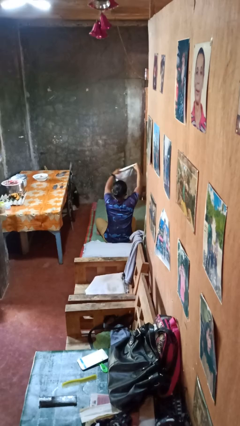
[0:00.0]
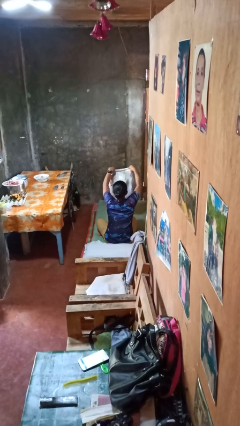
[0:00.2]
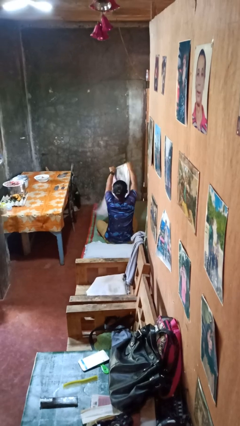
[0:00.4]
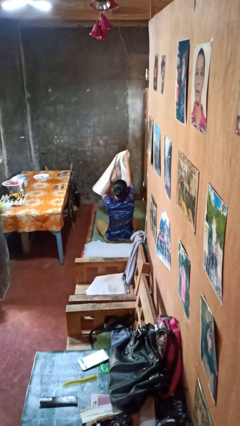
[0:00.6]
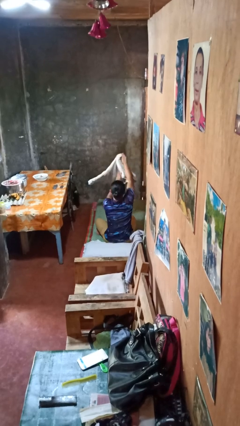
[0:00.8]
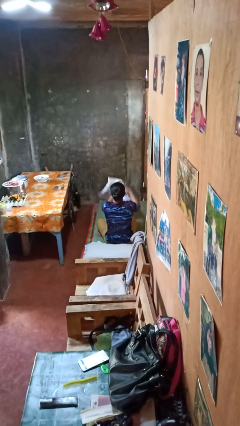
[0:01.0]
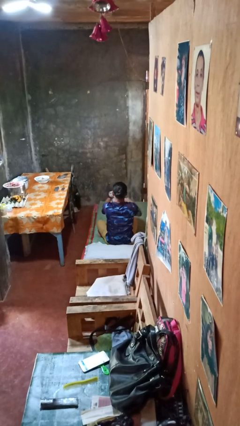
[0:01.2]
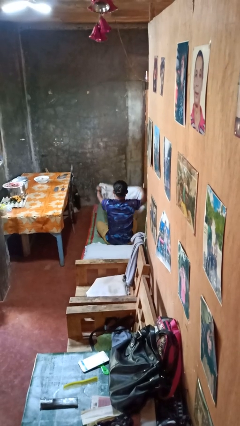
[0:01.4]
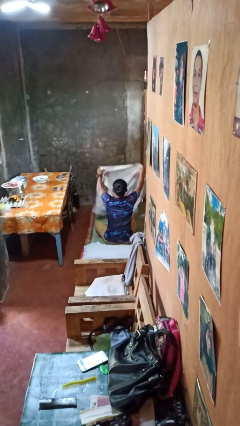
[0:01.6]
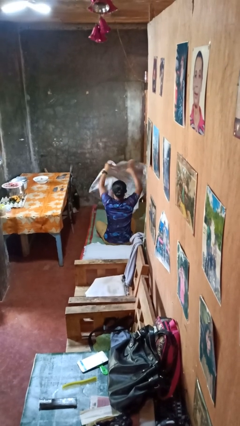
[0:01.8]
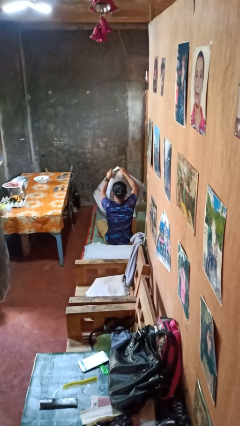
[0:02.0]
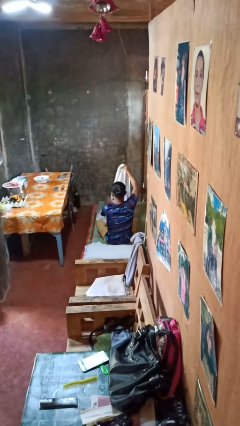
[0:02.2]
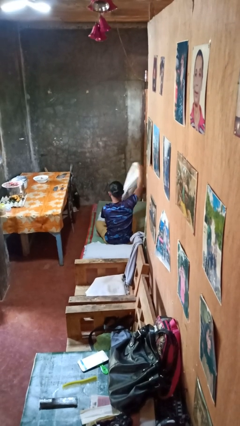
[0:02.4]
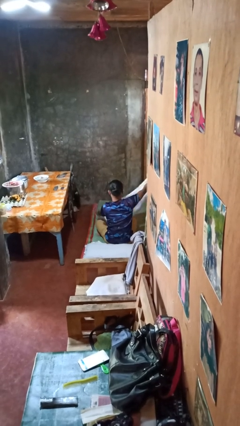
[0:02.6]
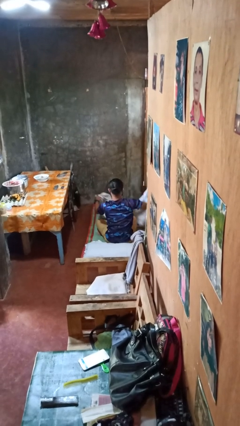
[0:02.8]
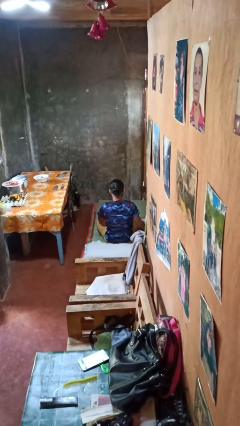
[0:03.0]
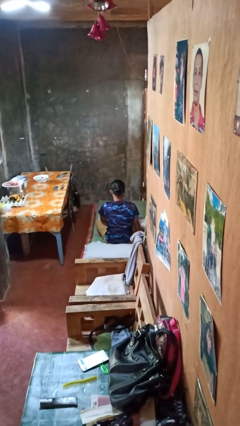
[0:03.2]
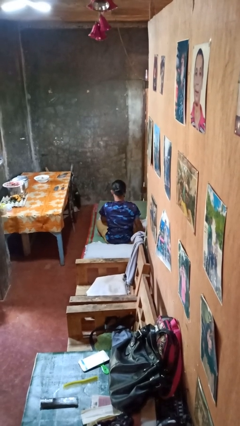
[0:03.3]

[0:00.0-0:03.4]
person unfolds blanket

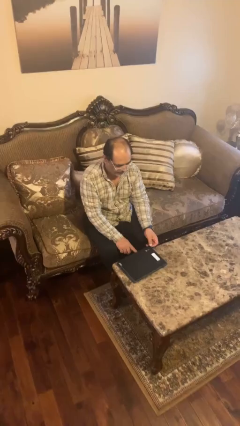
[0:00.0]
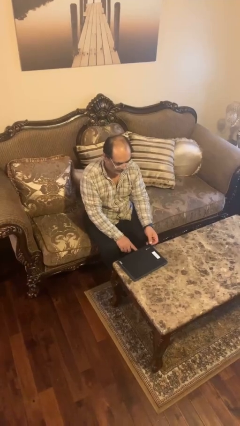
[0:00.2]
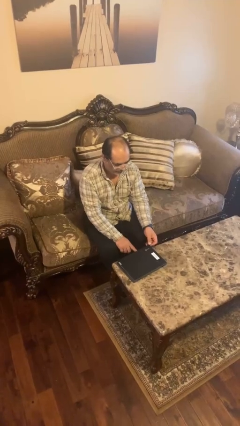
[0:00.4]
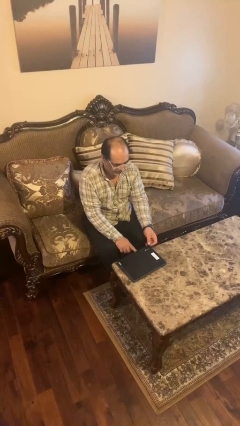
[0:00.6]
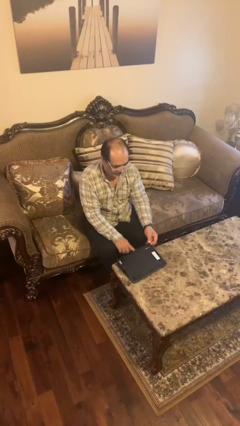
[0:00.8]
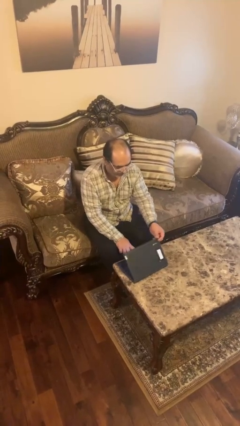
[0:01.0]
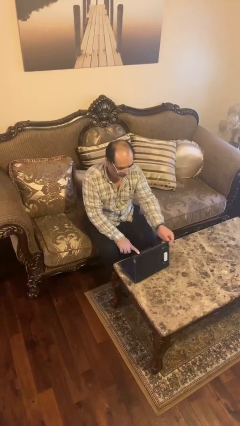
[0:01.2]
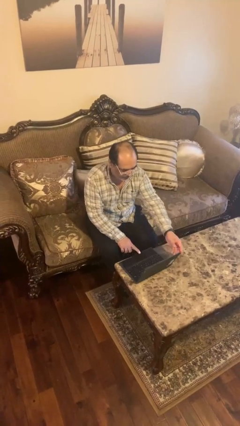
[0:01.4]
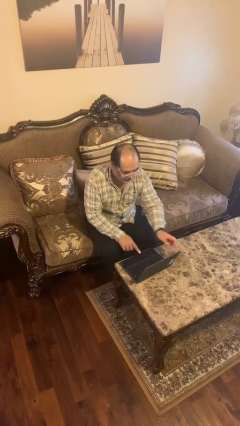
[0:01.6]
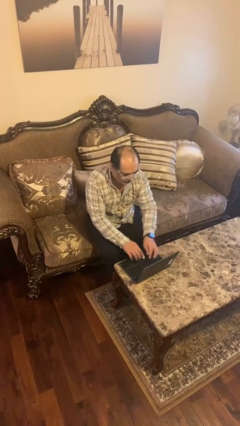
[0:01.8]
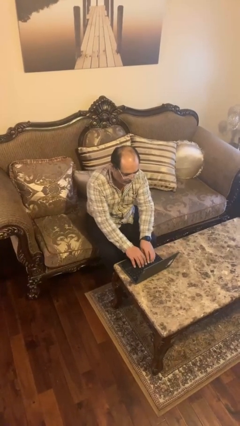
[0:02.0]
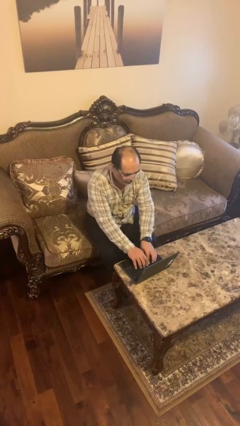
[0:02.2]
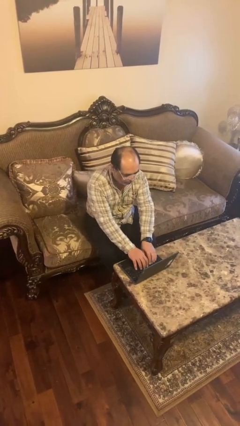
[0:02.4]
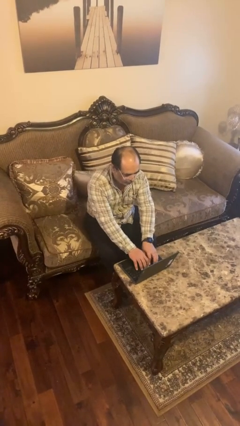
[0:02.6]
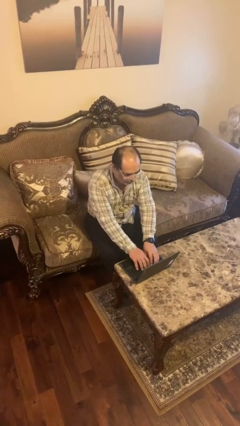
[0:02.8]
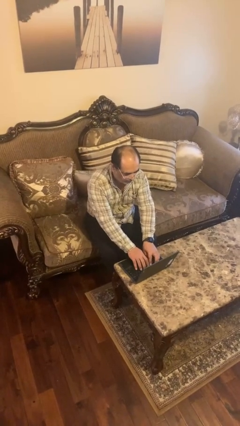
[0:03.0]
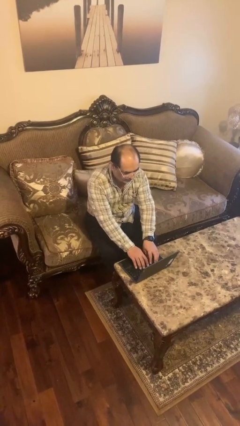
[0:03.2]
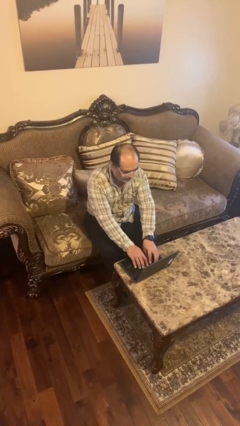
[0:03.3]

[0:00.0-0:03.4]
person interacts with laptop

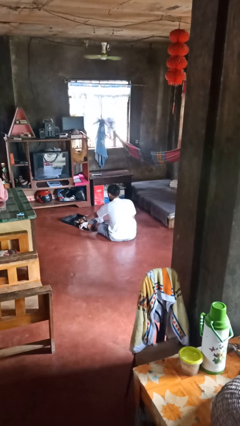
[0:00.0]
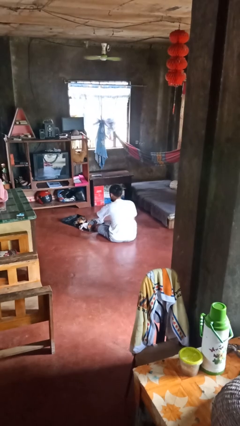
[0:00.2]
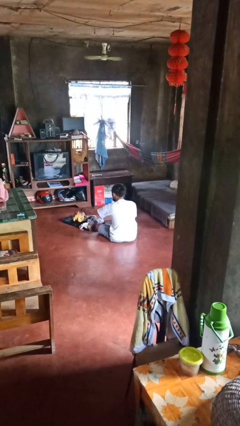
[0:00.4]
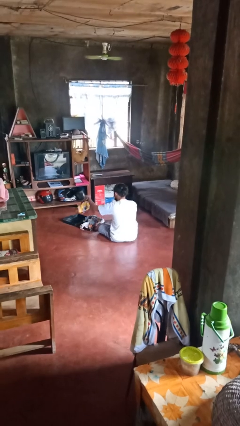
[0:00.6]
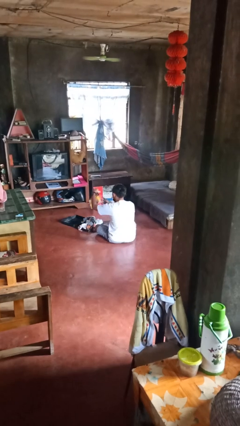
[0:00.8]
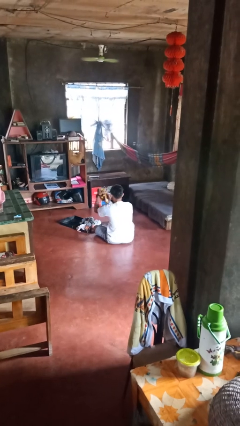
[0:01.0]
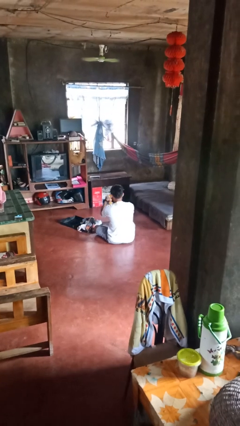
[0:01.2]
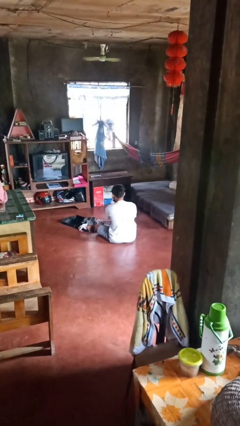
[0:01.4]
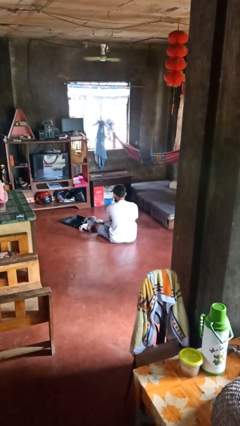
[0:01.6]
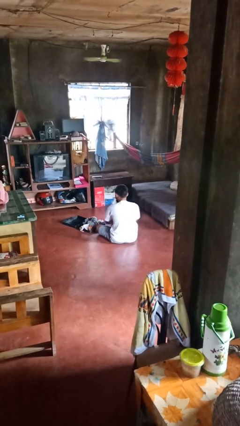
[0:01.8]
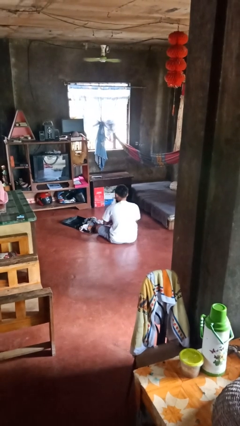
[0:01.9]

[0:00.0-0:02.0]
person unloads clothes from suitcase

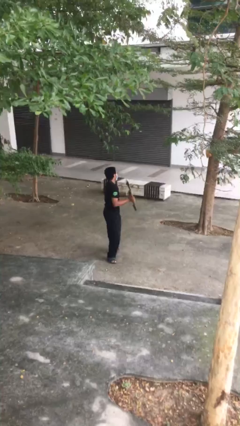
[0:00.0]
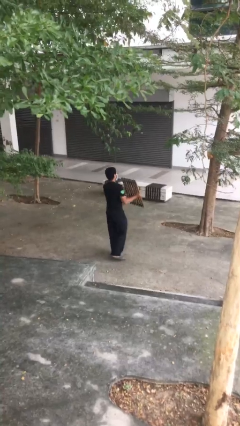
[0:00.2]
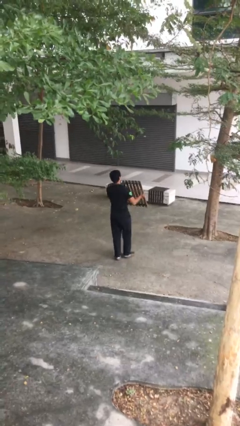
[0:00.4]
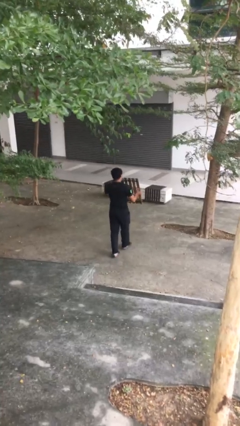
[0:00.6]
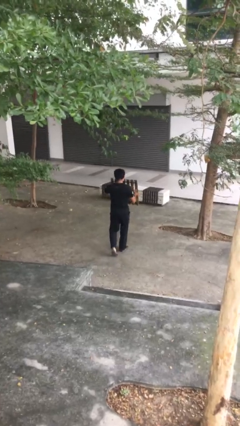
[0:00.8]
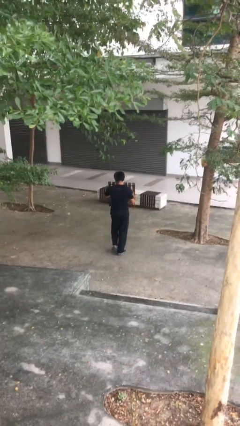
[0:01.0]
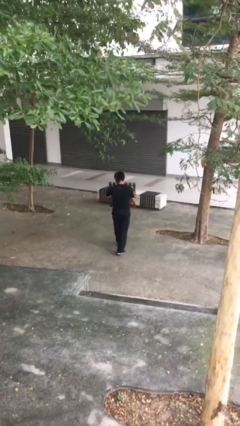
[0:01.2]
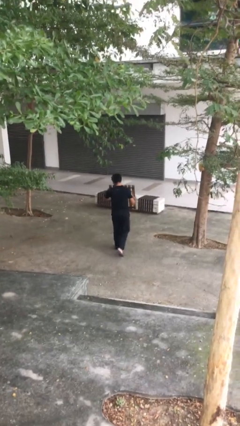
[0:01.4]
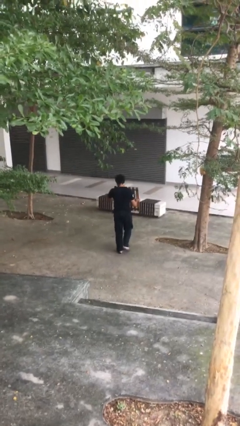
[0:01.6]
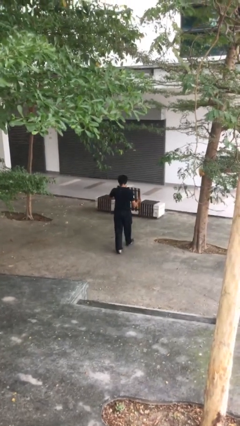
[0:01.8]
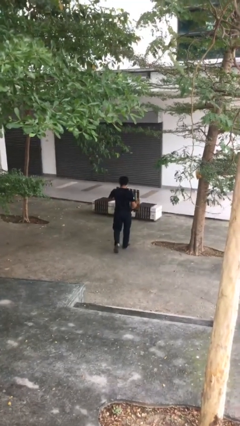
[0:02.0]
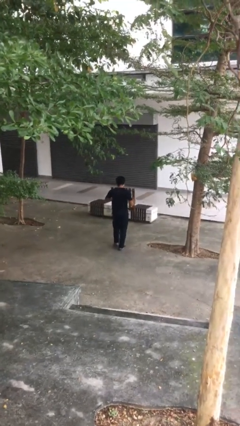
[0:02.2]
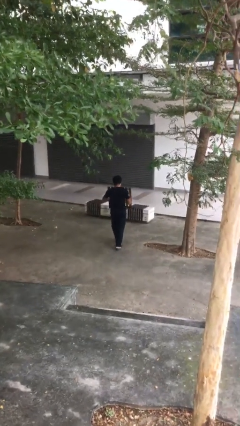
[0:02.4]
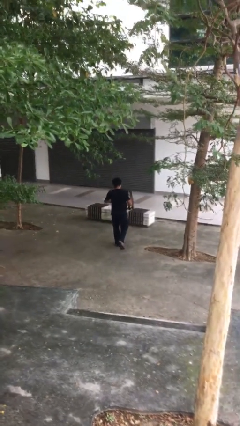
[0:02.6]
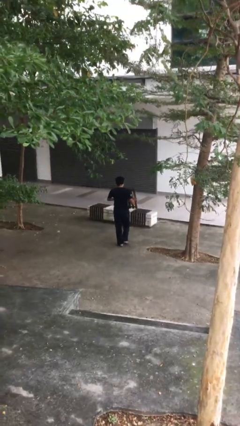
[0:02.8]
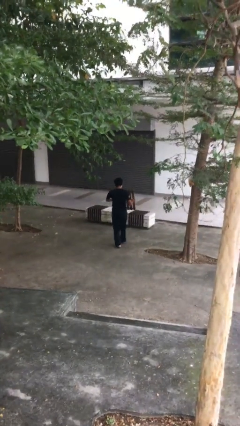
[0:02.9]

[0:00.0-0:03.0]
person carries heavy object

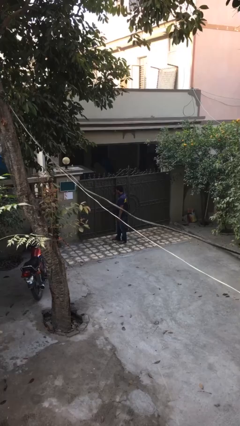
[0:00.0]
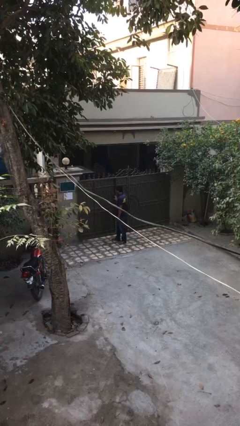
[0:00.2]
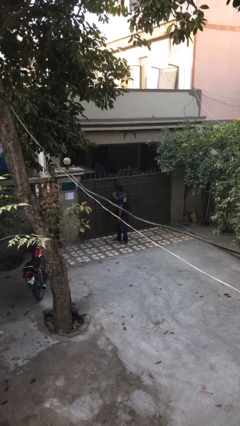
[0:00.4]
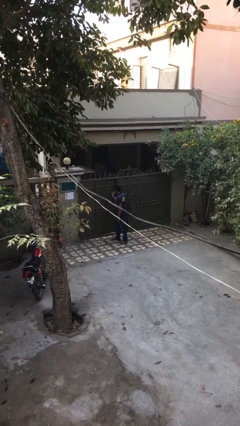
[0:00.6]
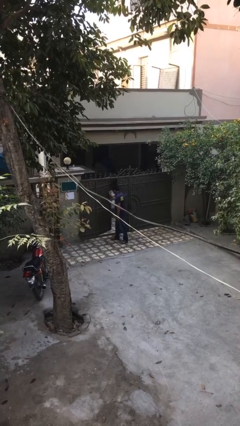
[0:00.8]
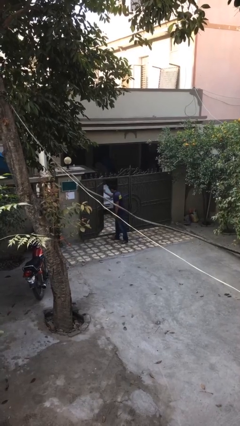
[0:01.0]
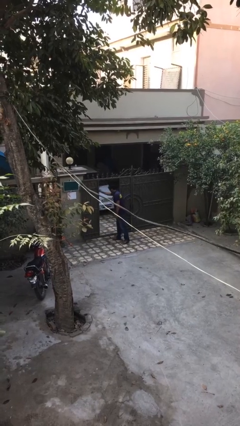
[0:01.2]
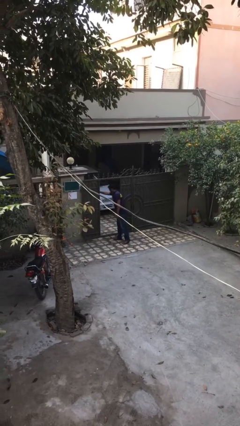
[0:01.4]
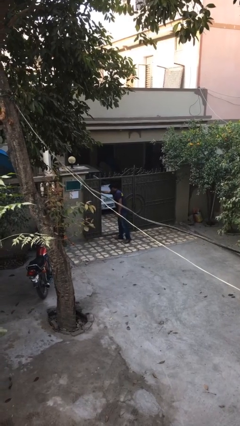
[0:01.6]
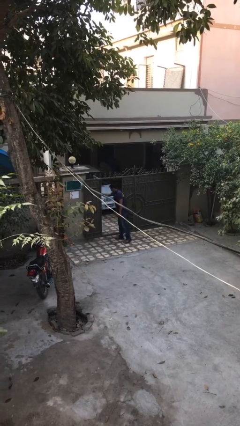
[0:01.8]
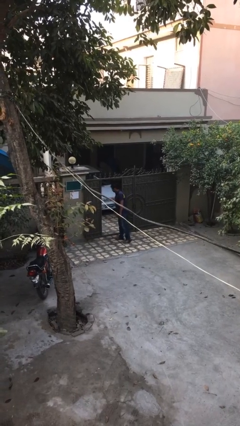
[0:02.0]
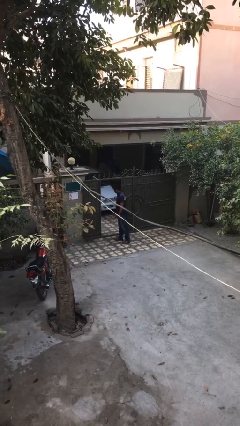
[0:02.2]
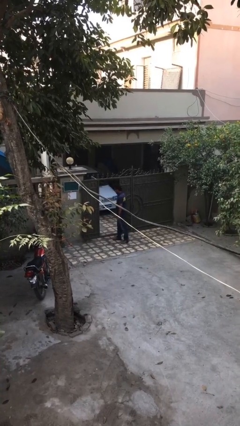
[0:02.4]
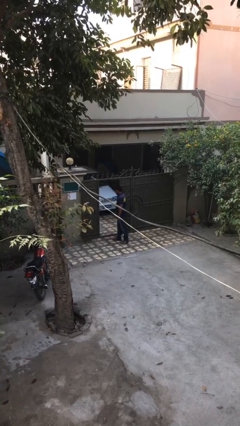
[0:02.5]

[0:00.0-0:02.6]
person opens facility door

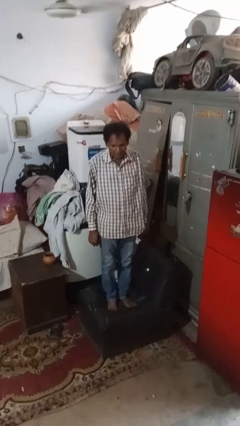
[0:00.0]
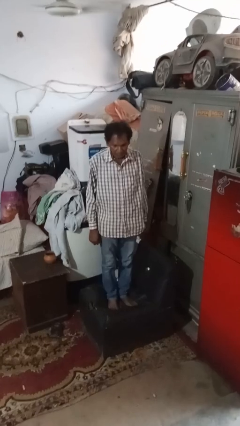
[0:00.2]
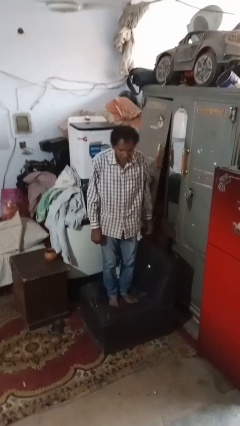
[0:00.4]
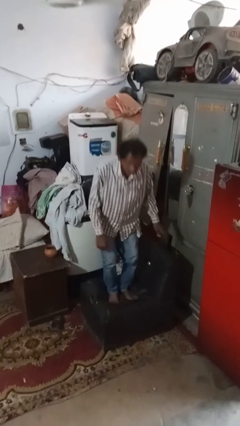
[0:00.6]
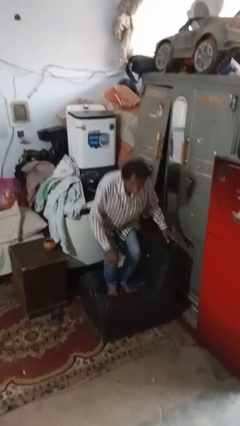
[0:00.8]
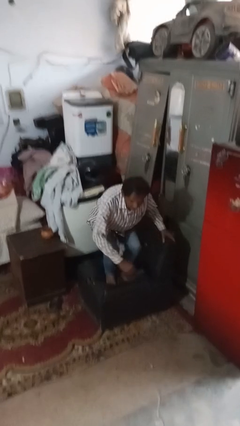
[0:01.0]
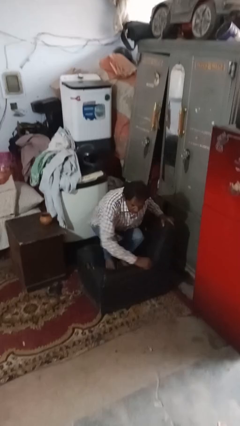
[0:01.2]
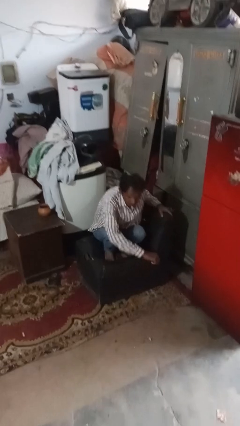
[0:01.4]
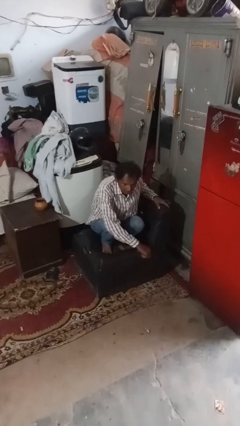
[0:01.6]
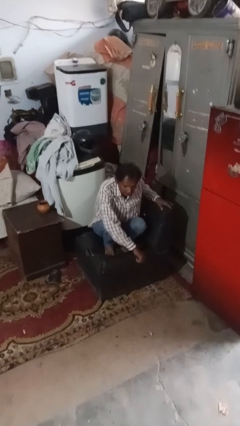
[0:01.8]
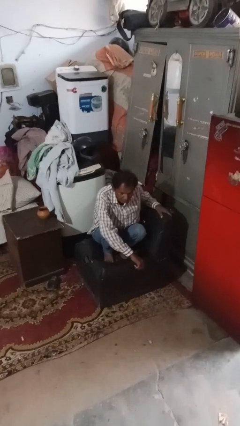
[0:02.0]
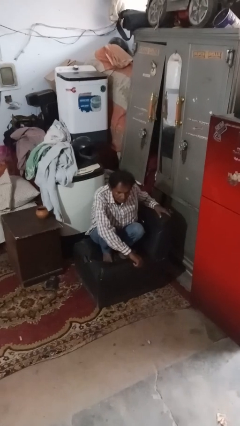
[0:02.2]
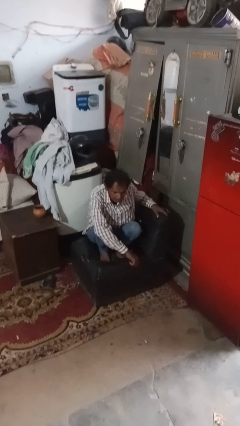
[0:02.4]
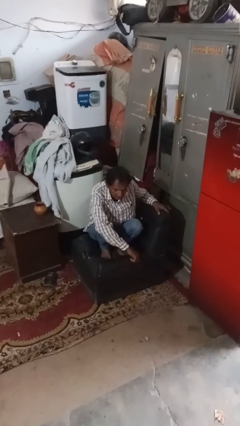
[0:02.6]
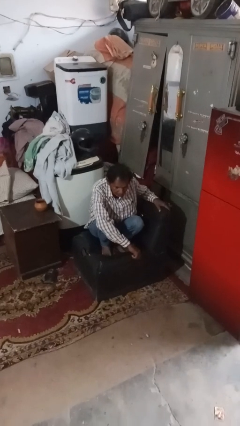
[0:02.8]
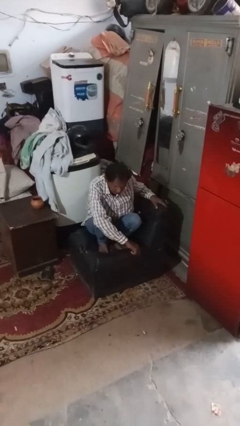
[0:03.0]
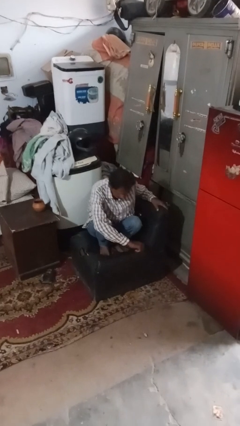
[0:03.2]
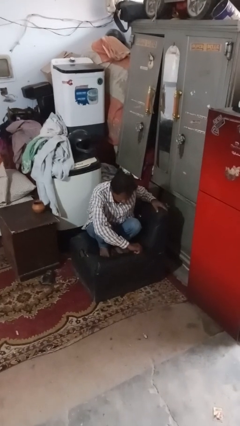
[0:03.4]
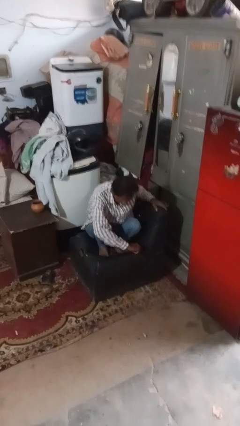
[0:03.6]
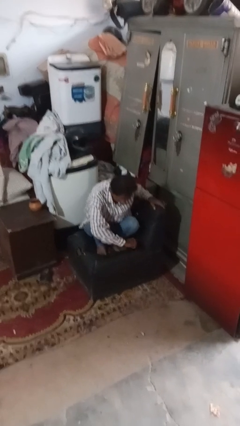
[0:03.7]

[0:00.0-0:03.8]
person lies down on couch
